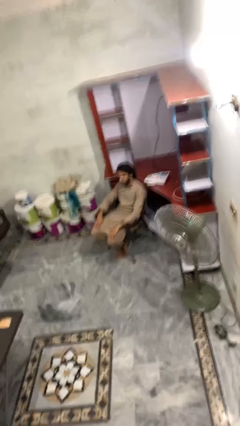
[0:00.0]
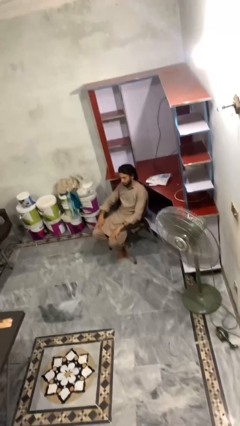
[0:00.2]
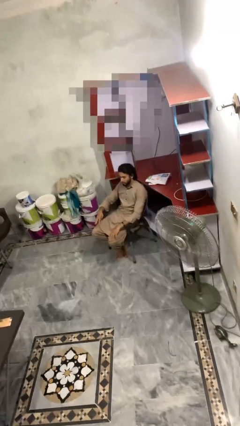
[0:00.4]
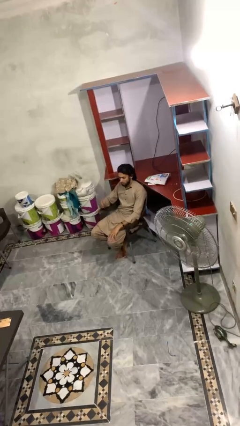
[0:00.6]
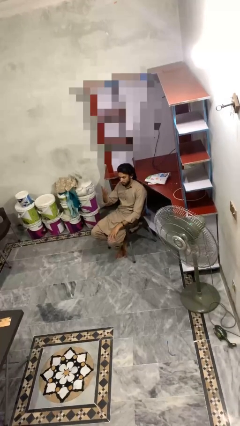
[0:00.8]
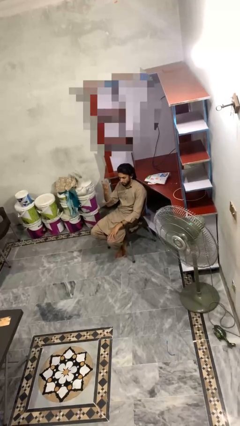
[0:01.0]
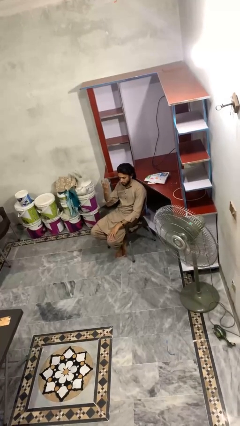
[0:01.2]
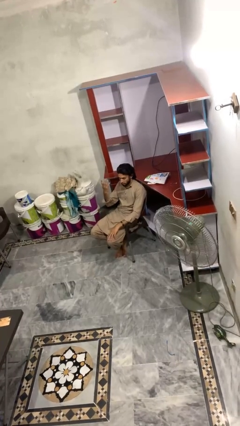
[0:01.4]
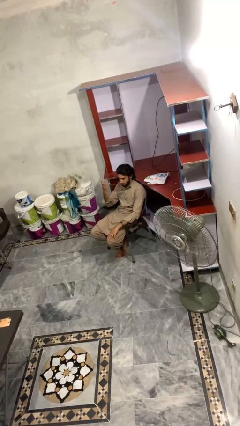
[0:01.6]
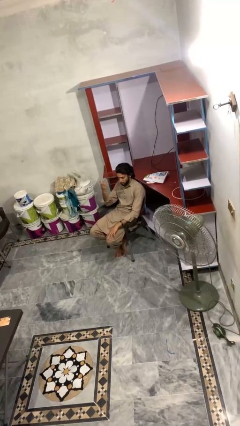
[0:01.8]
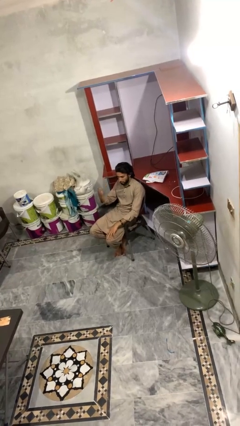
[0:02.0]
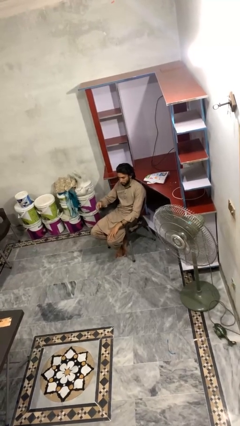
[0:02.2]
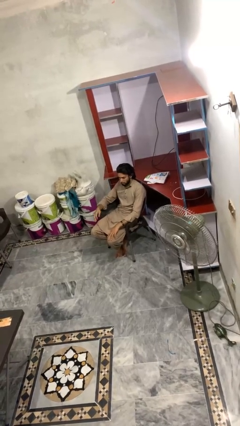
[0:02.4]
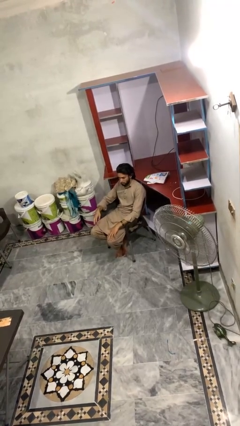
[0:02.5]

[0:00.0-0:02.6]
person gestures number four

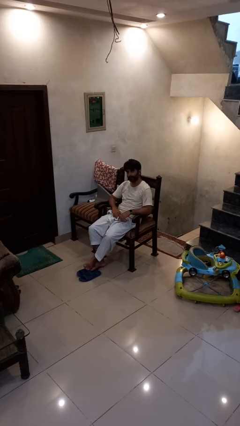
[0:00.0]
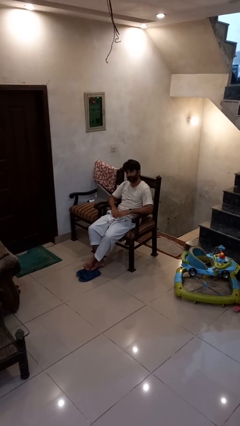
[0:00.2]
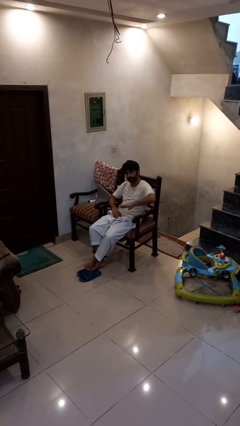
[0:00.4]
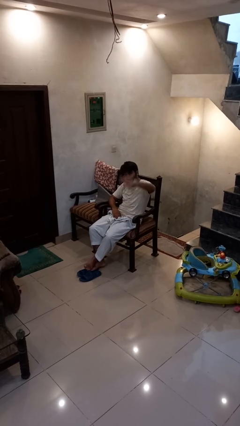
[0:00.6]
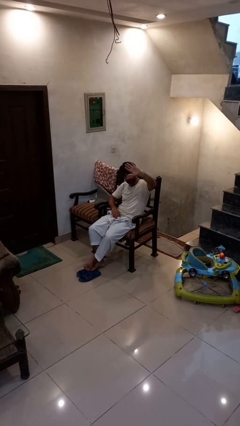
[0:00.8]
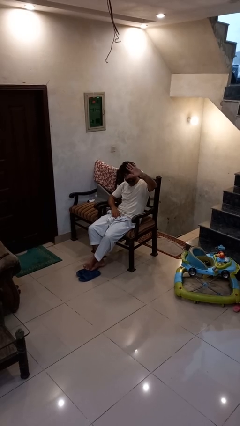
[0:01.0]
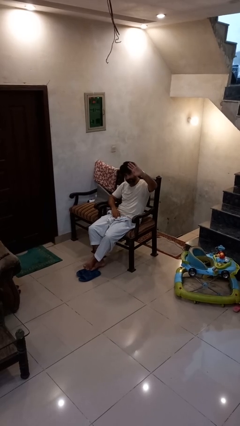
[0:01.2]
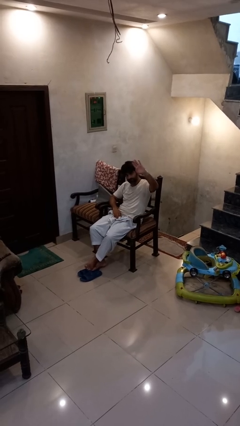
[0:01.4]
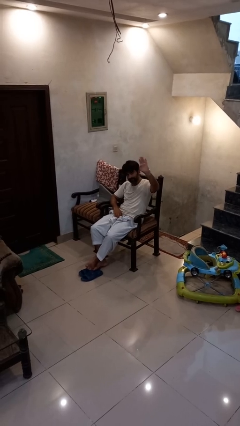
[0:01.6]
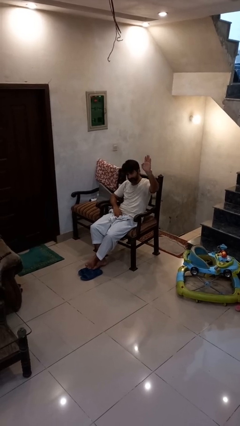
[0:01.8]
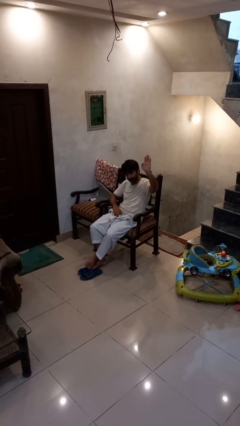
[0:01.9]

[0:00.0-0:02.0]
person gestures swipe up

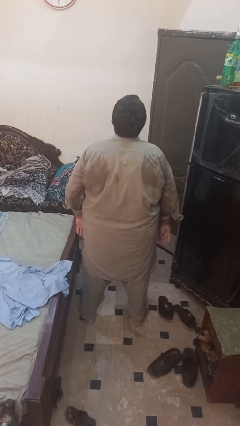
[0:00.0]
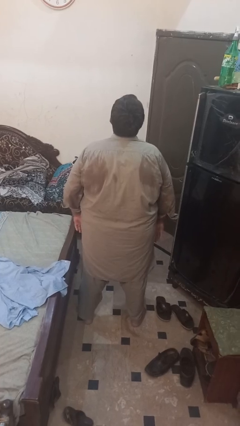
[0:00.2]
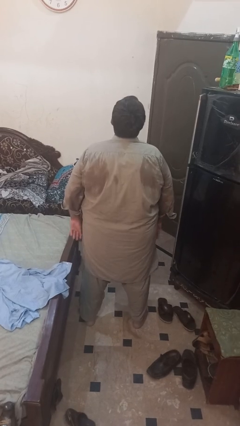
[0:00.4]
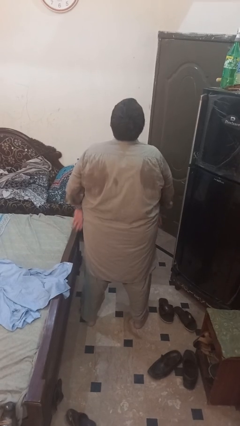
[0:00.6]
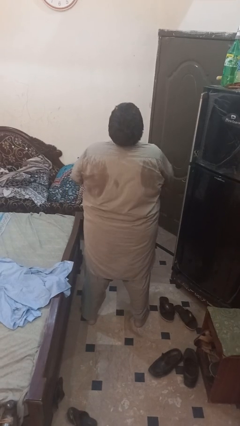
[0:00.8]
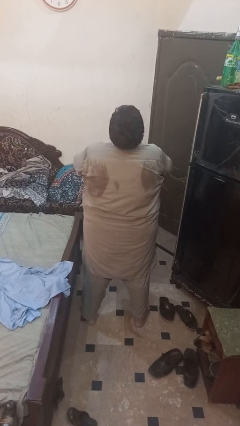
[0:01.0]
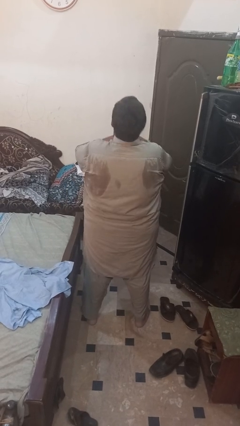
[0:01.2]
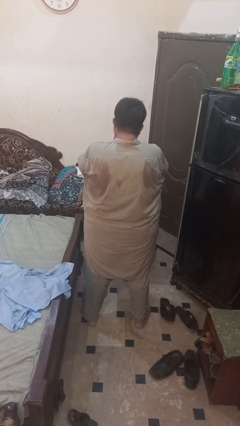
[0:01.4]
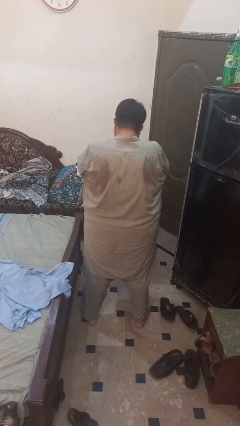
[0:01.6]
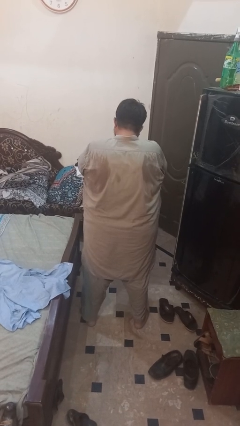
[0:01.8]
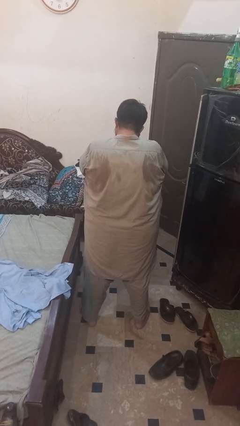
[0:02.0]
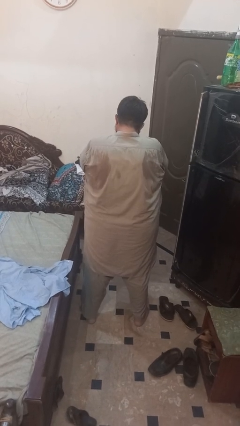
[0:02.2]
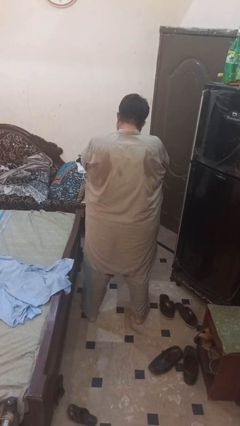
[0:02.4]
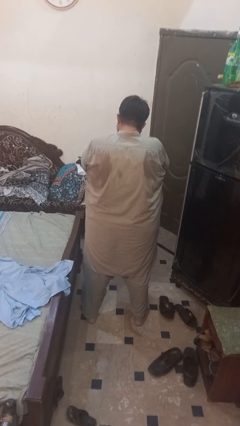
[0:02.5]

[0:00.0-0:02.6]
person sneezes into hand

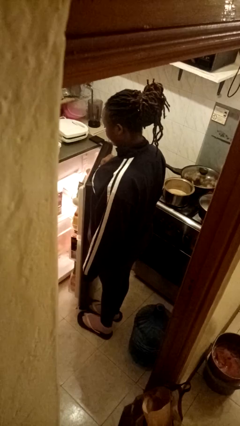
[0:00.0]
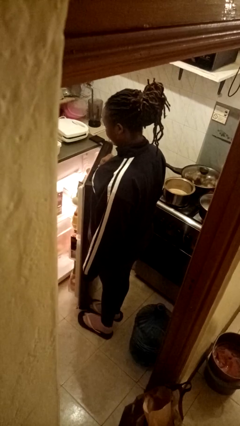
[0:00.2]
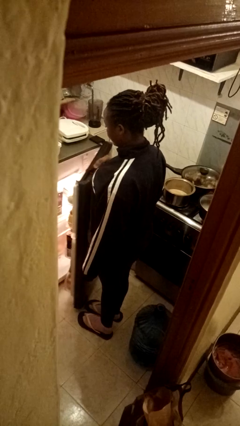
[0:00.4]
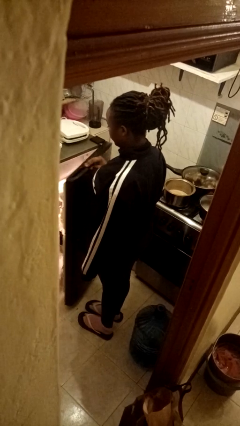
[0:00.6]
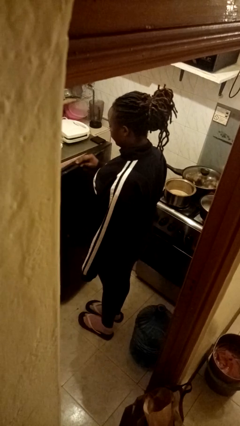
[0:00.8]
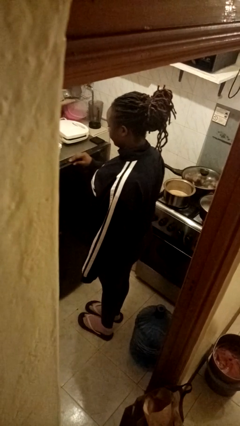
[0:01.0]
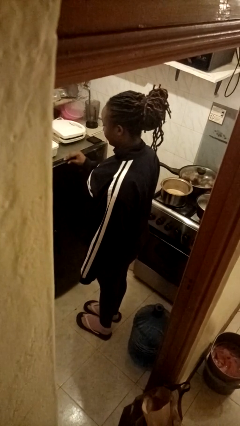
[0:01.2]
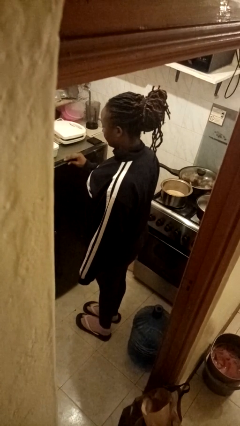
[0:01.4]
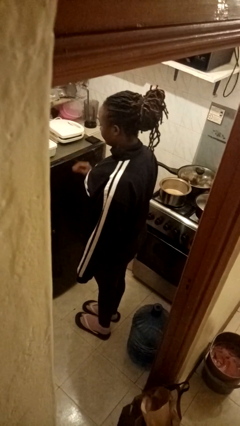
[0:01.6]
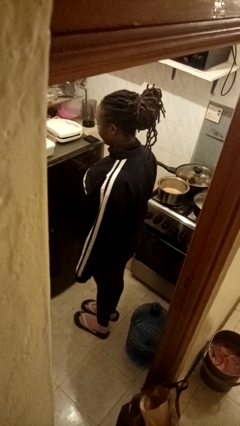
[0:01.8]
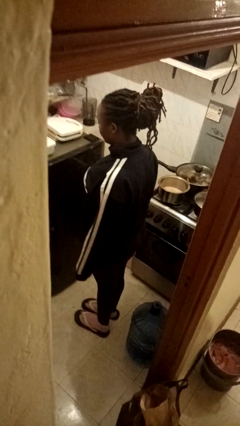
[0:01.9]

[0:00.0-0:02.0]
person closes refrigerator

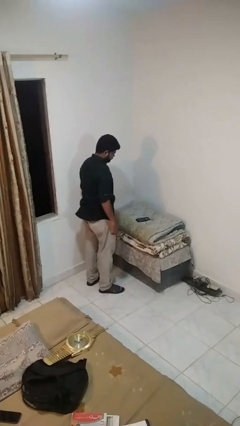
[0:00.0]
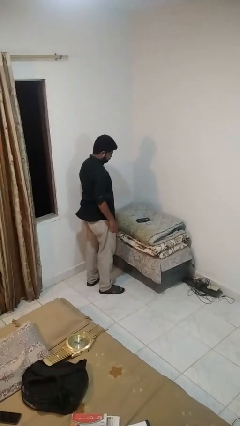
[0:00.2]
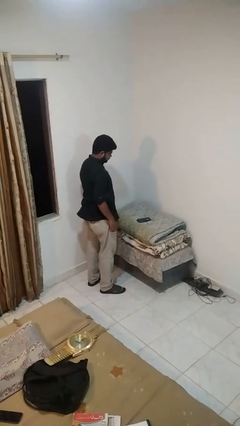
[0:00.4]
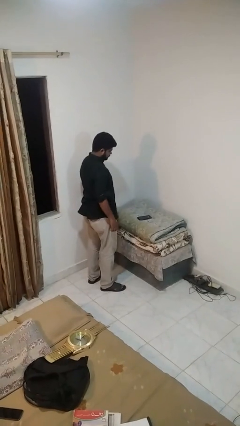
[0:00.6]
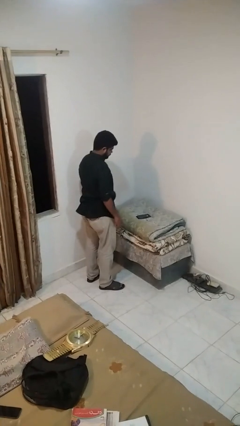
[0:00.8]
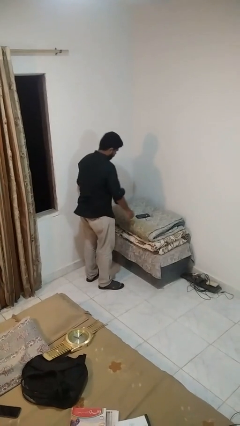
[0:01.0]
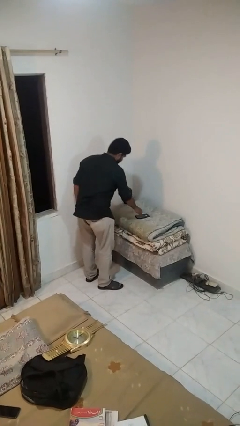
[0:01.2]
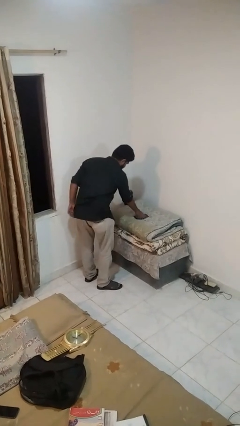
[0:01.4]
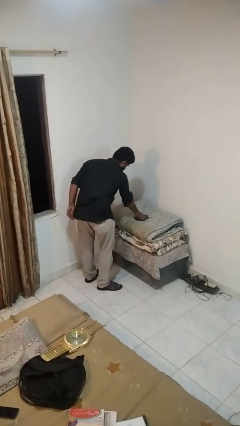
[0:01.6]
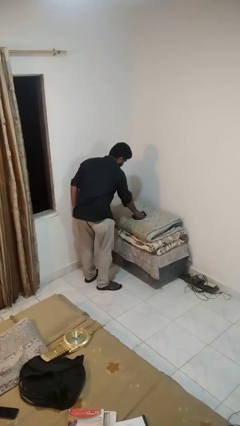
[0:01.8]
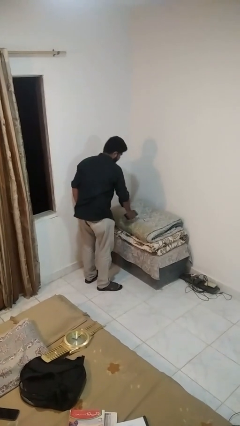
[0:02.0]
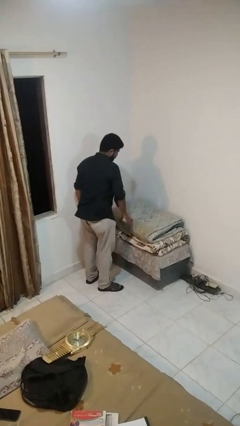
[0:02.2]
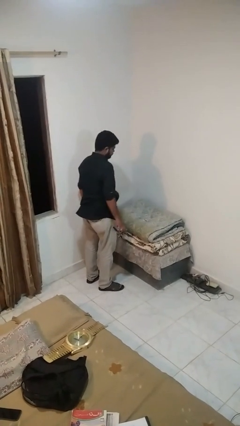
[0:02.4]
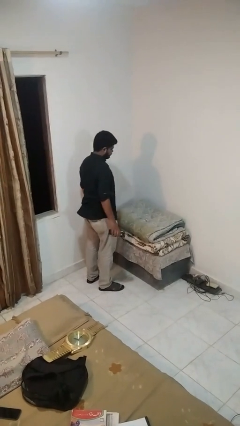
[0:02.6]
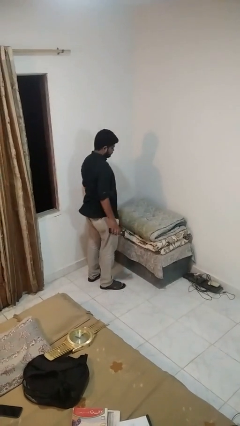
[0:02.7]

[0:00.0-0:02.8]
person picks up object from couch

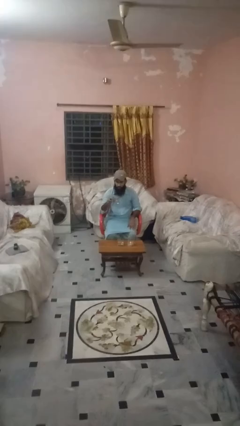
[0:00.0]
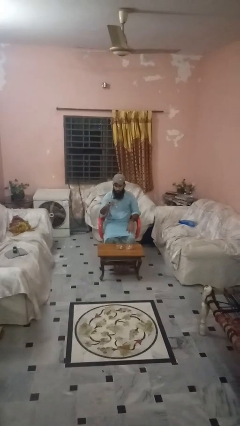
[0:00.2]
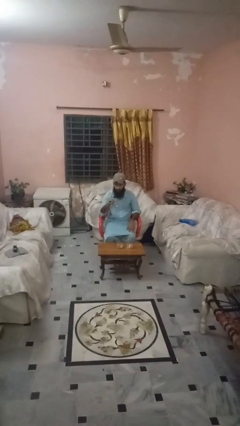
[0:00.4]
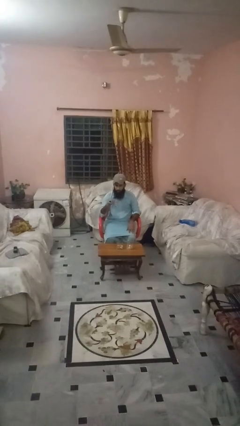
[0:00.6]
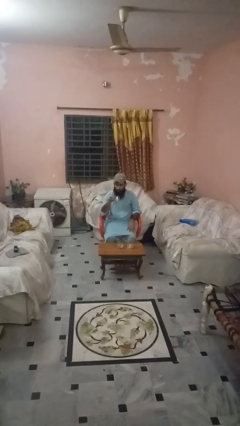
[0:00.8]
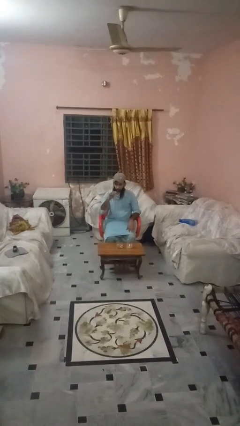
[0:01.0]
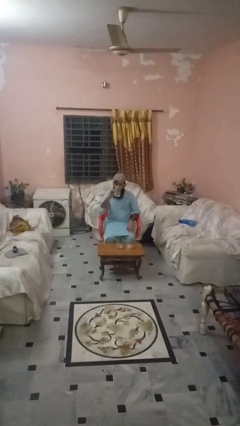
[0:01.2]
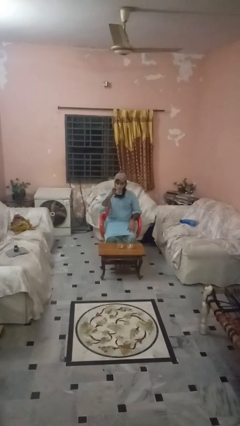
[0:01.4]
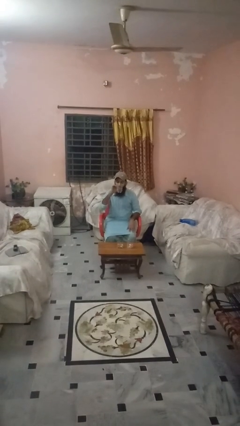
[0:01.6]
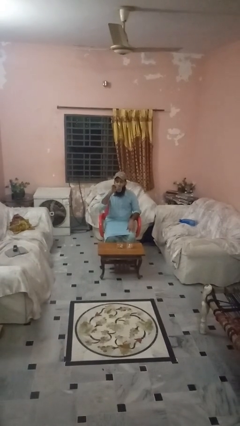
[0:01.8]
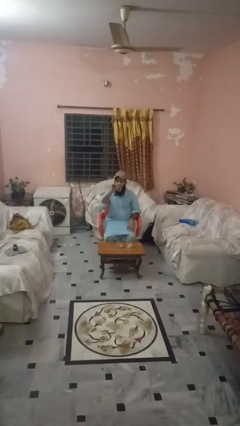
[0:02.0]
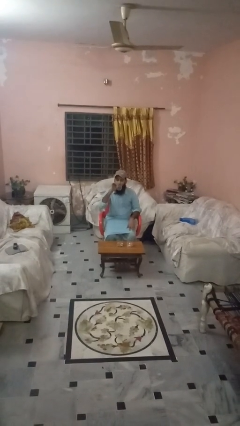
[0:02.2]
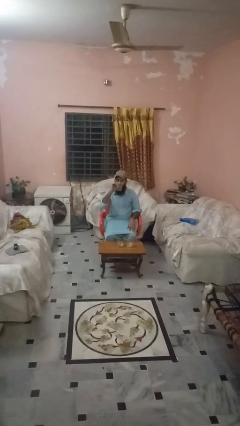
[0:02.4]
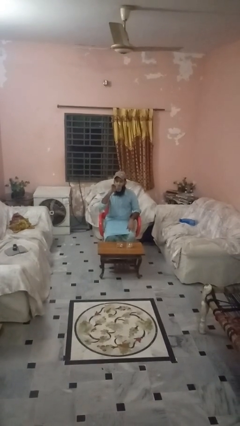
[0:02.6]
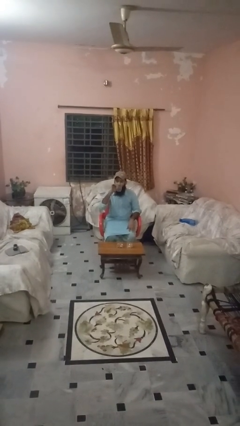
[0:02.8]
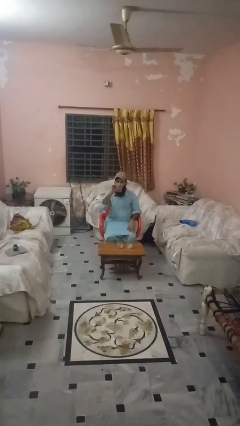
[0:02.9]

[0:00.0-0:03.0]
person drinks from shotglass

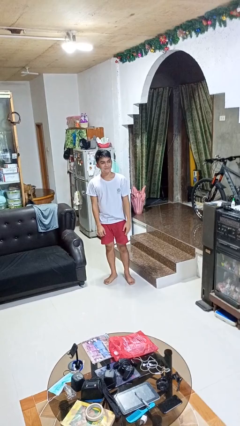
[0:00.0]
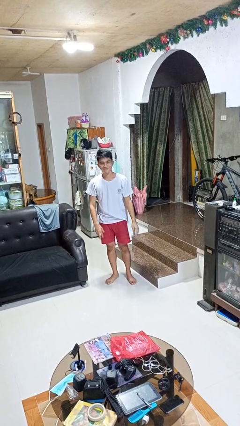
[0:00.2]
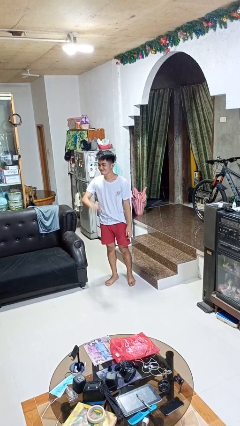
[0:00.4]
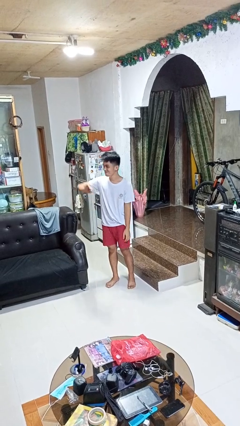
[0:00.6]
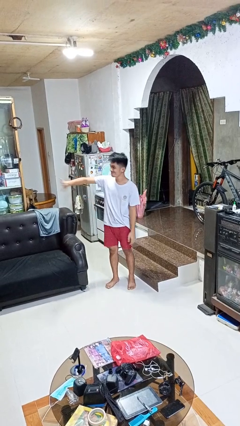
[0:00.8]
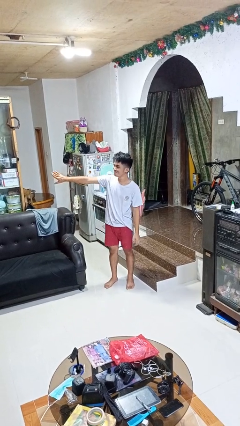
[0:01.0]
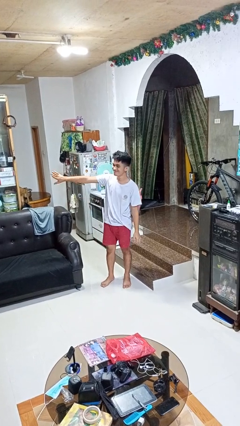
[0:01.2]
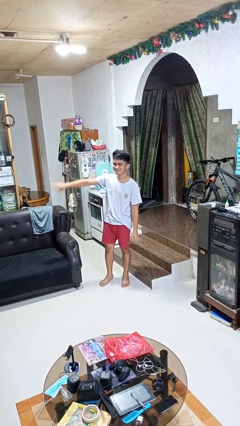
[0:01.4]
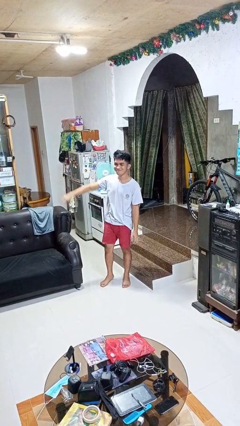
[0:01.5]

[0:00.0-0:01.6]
person gestures swipe right

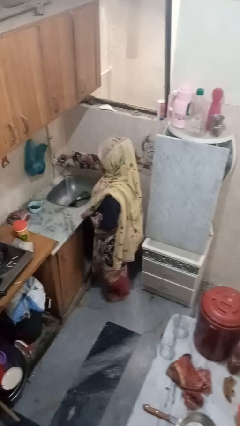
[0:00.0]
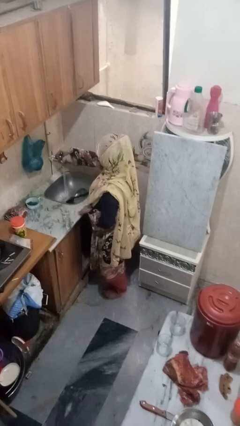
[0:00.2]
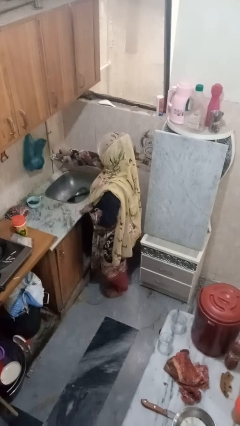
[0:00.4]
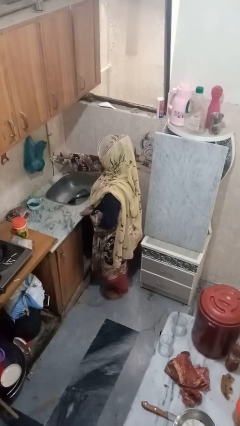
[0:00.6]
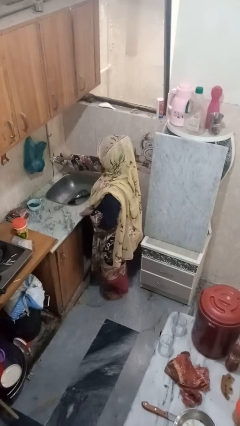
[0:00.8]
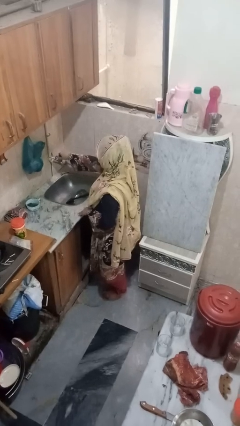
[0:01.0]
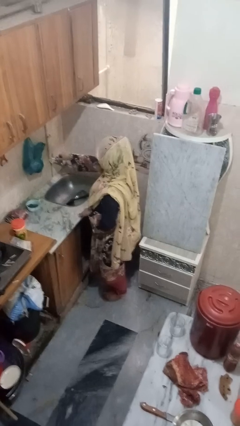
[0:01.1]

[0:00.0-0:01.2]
person turns off faucet
